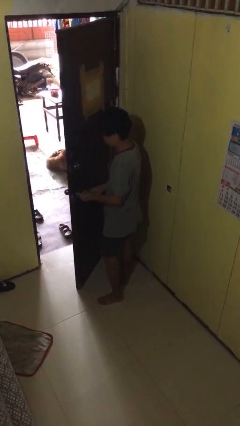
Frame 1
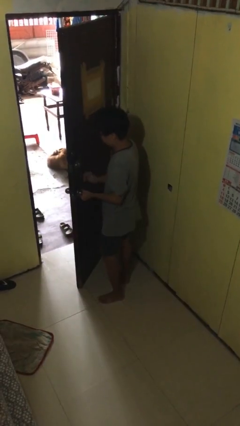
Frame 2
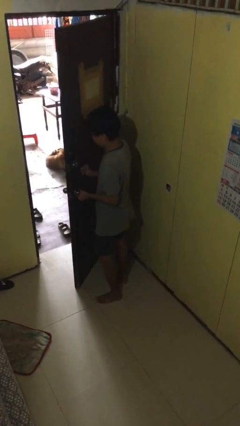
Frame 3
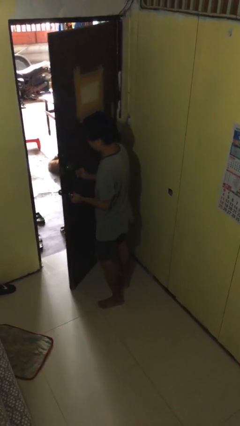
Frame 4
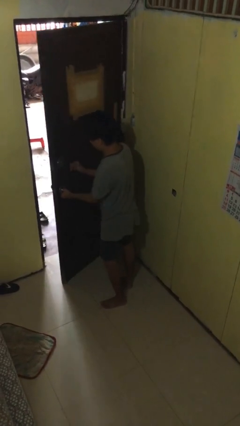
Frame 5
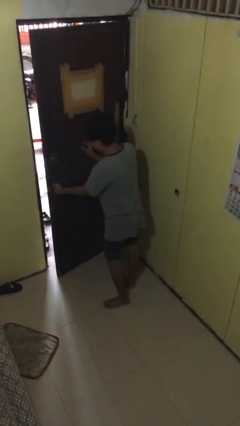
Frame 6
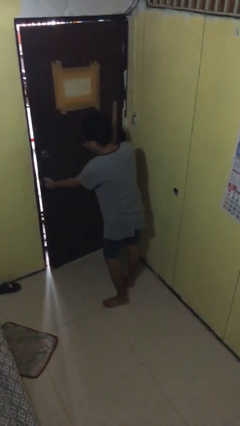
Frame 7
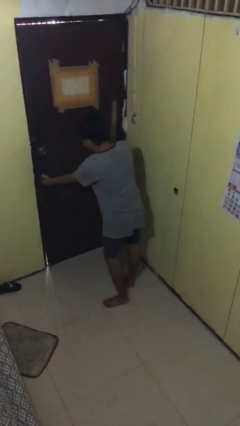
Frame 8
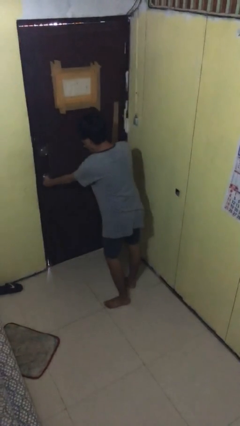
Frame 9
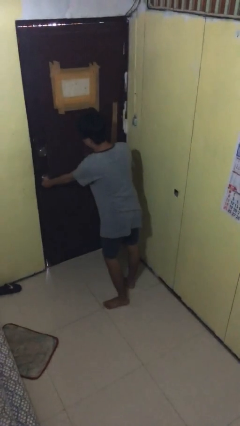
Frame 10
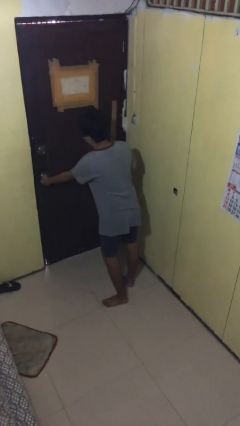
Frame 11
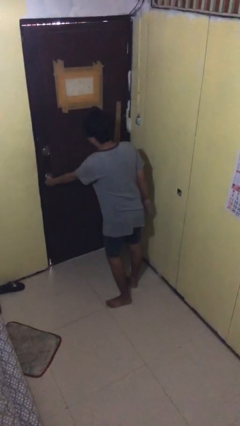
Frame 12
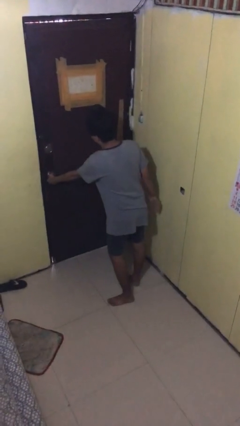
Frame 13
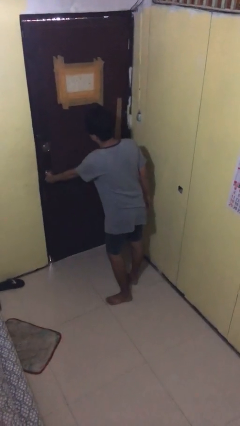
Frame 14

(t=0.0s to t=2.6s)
person closes facility door

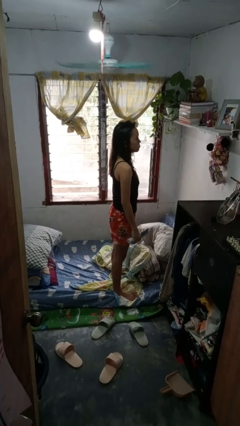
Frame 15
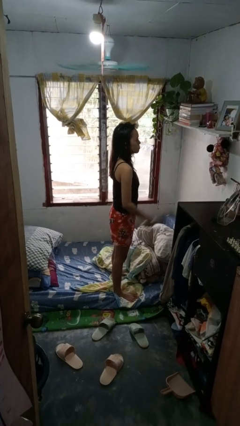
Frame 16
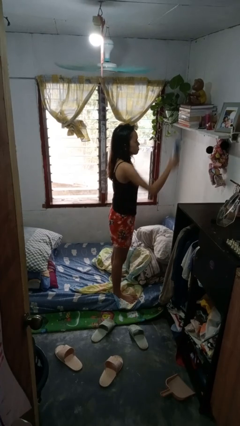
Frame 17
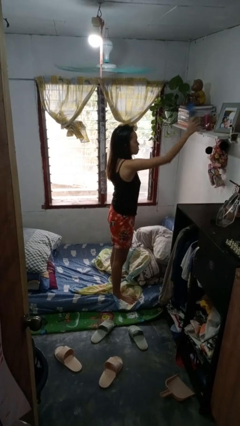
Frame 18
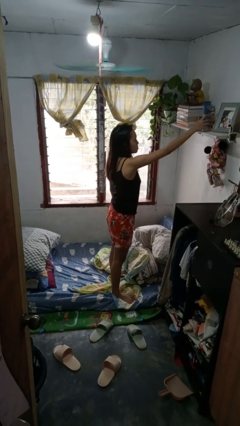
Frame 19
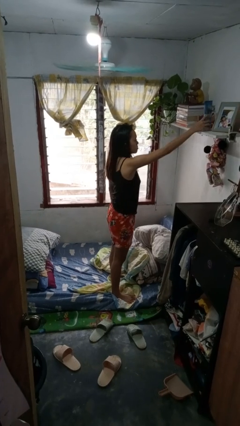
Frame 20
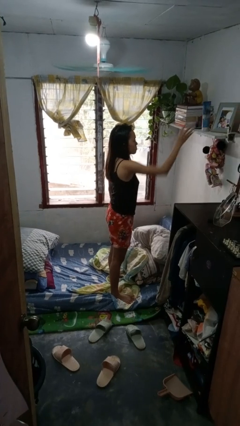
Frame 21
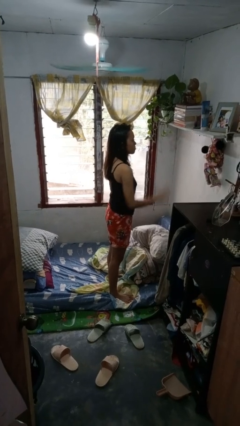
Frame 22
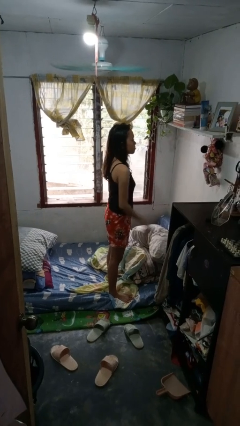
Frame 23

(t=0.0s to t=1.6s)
person puts down object on shelf

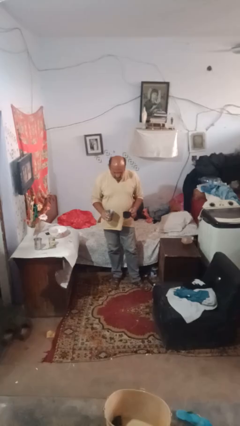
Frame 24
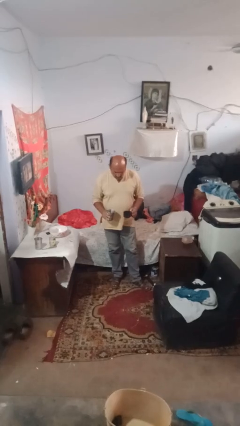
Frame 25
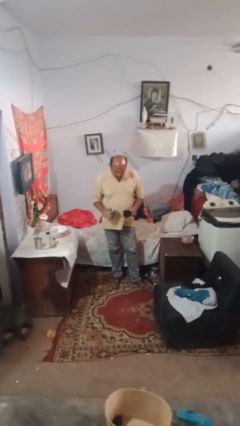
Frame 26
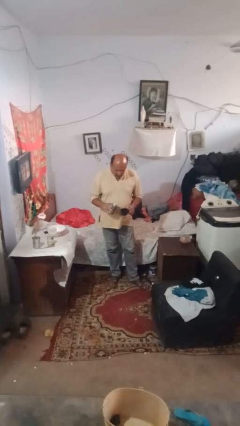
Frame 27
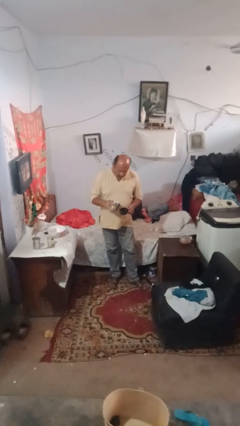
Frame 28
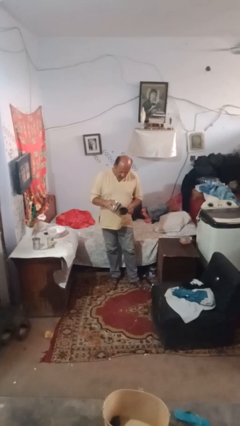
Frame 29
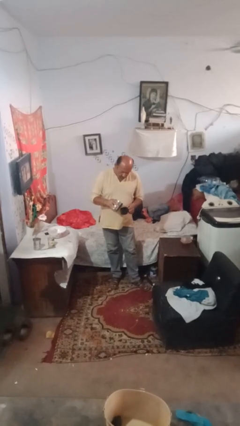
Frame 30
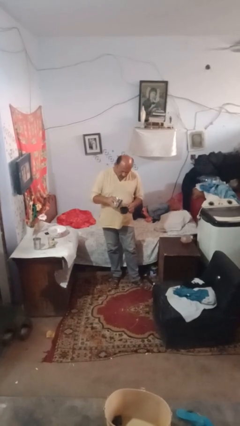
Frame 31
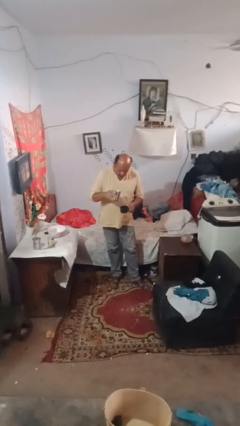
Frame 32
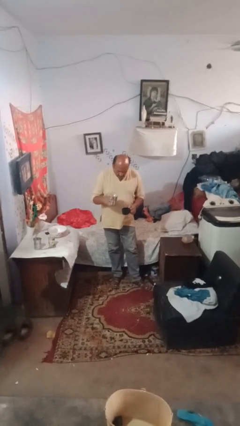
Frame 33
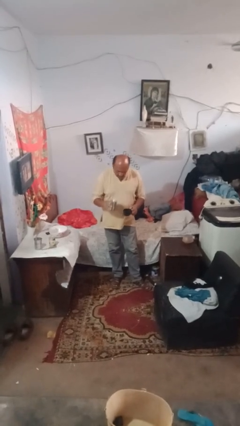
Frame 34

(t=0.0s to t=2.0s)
person pours liquid into cup

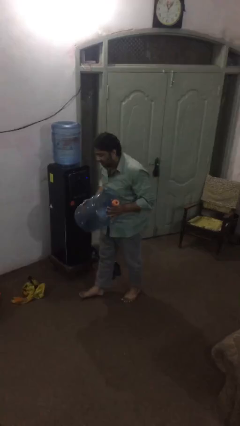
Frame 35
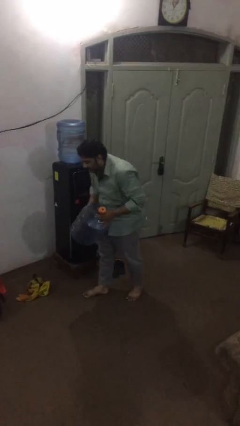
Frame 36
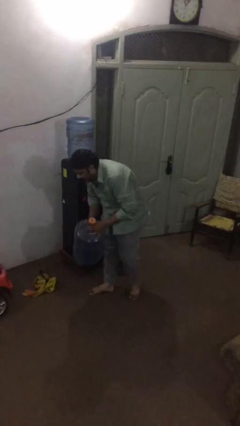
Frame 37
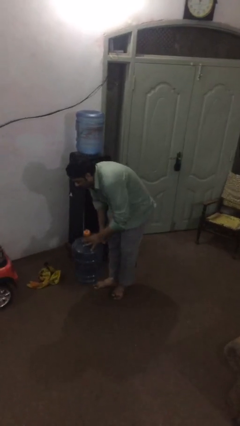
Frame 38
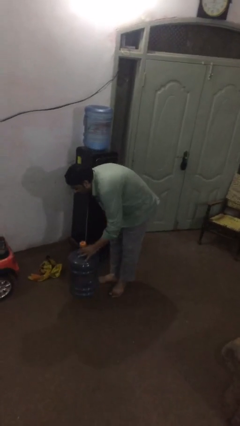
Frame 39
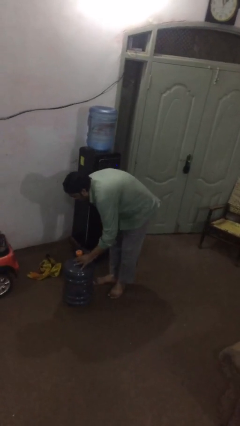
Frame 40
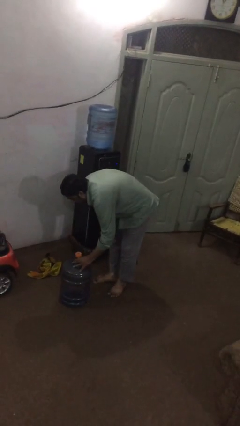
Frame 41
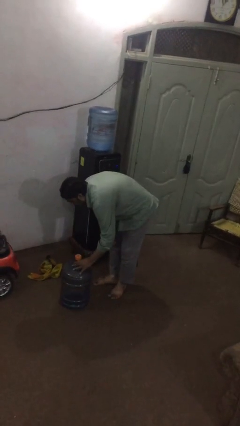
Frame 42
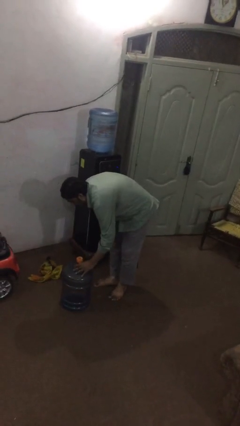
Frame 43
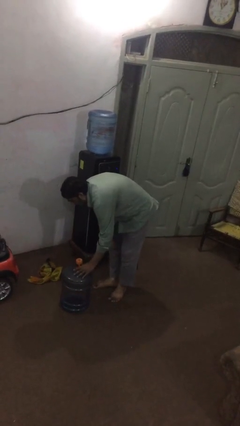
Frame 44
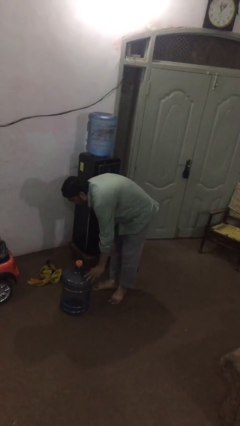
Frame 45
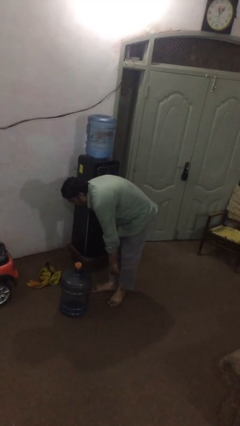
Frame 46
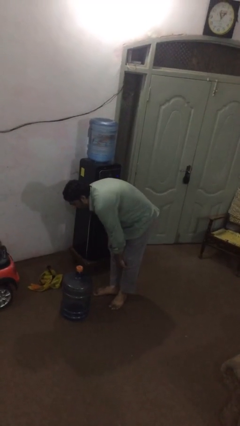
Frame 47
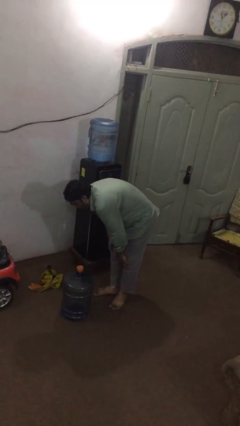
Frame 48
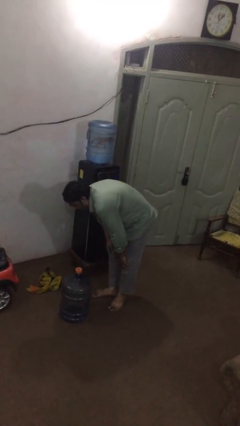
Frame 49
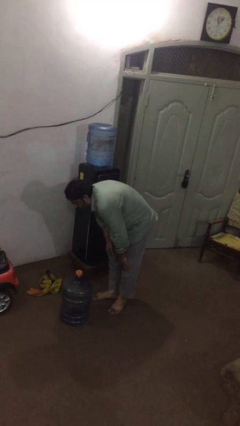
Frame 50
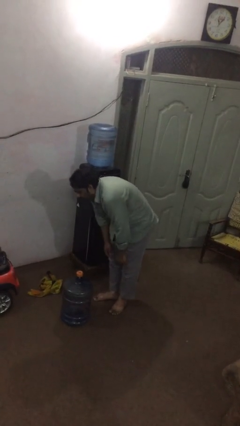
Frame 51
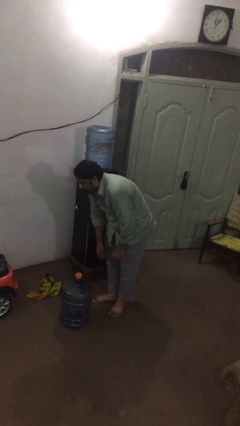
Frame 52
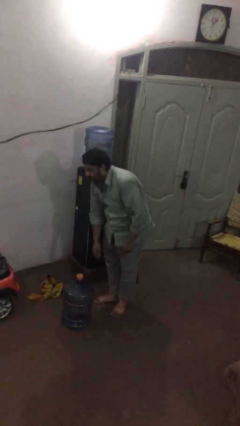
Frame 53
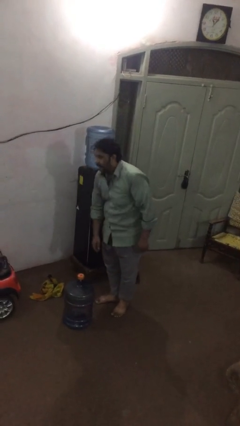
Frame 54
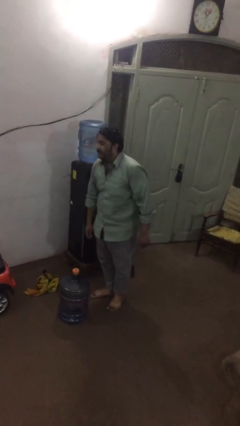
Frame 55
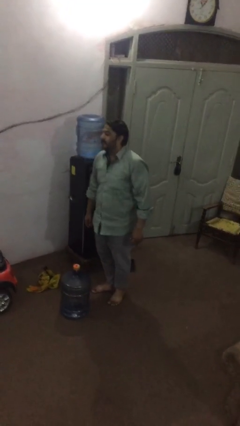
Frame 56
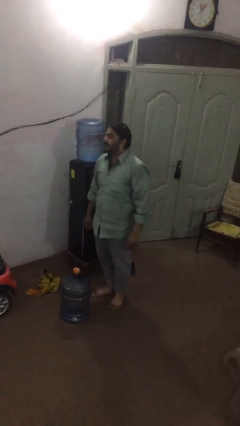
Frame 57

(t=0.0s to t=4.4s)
person puts down object on floor

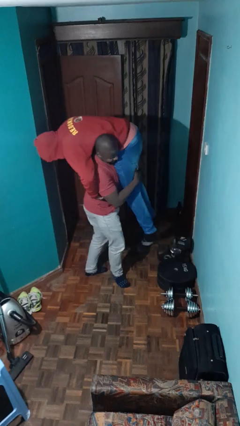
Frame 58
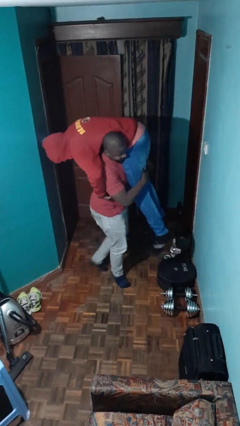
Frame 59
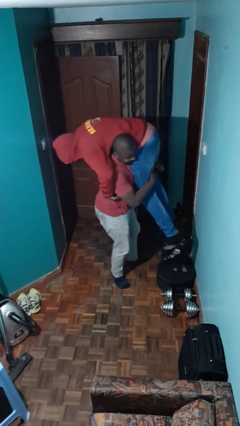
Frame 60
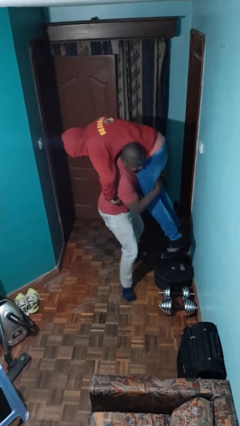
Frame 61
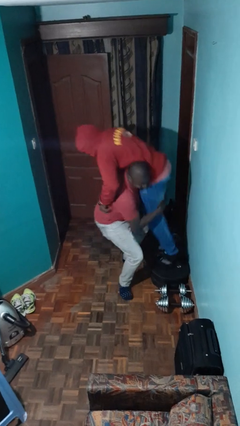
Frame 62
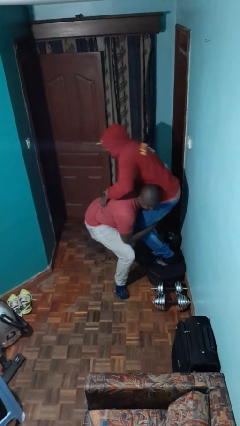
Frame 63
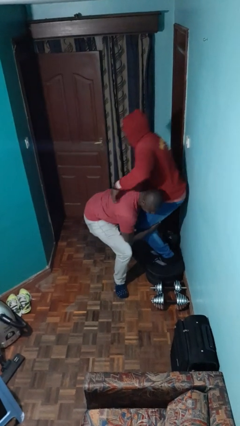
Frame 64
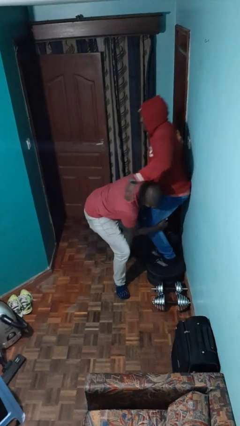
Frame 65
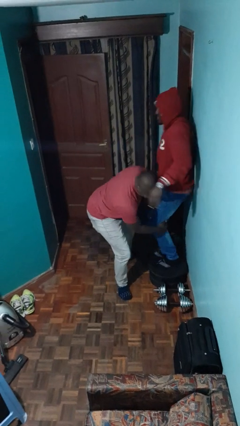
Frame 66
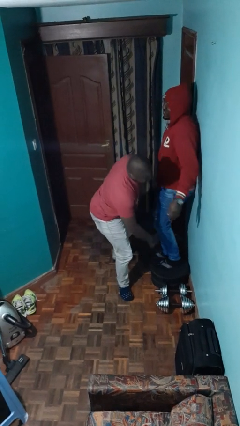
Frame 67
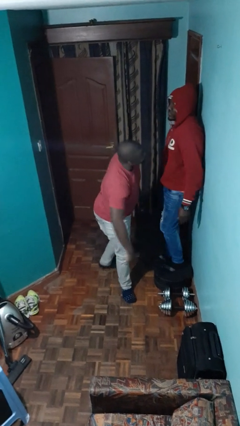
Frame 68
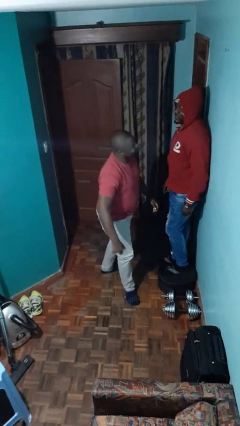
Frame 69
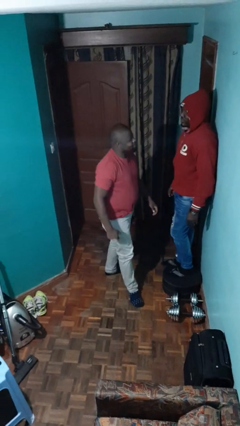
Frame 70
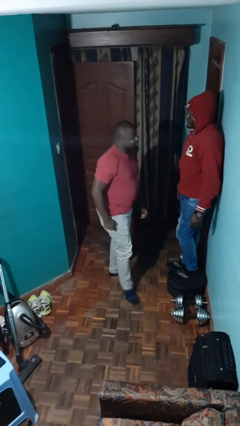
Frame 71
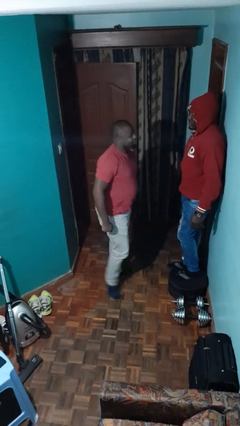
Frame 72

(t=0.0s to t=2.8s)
person puts down person

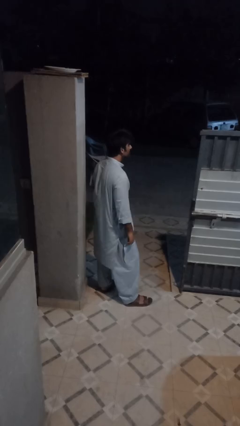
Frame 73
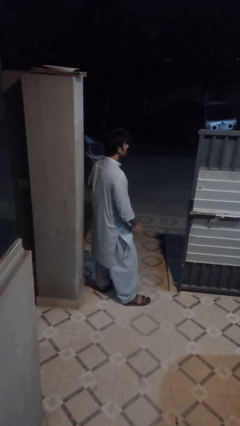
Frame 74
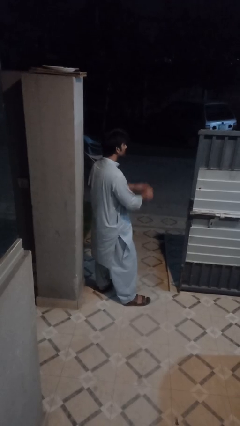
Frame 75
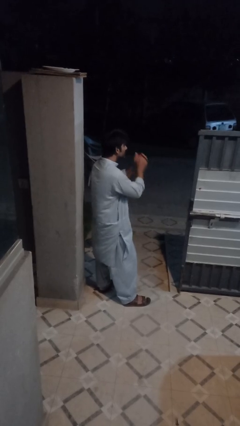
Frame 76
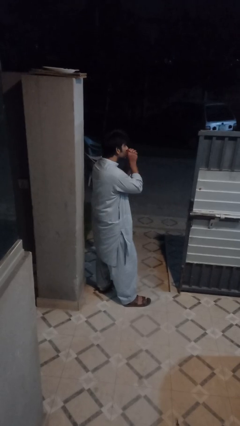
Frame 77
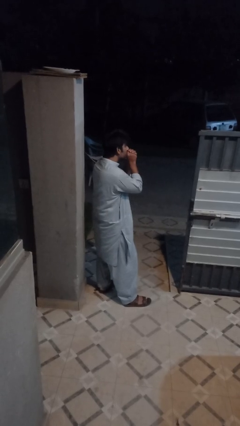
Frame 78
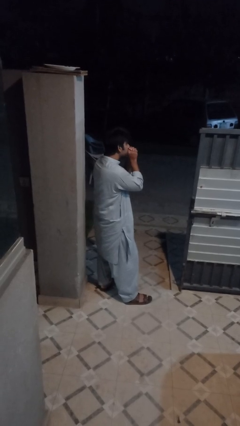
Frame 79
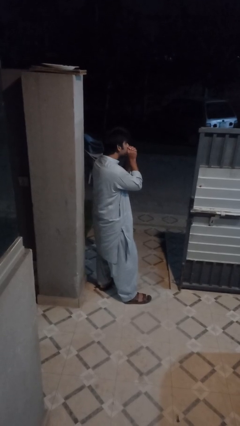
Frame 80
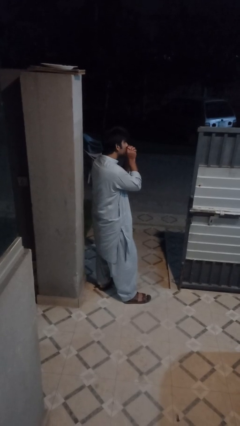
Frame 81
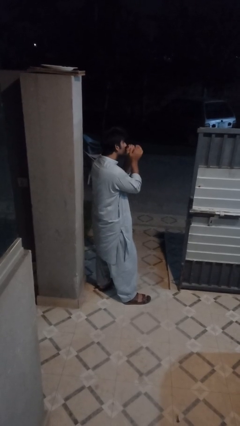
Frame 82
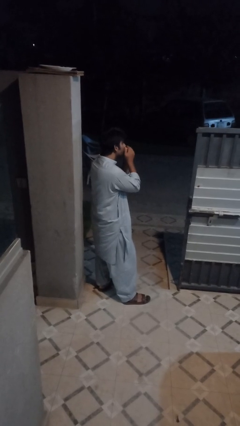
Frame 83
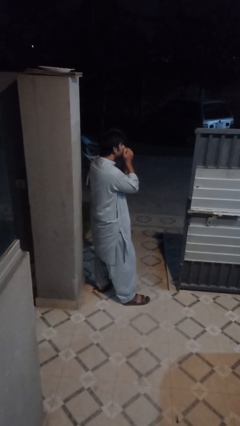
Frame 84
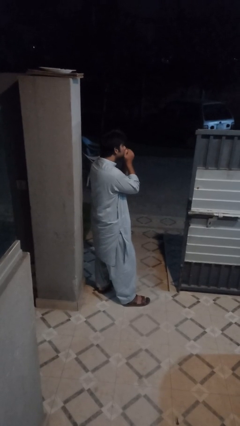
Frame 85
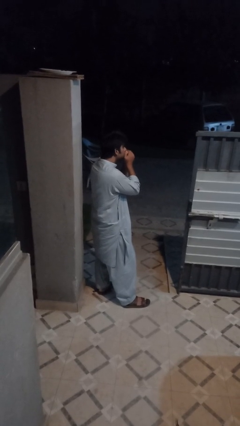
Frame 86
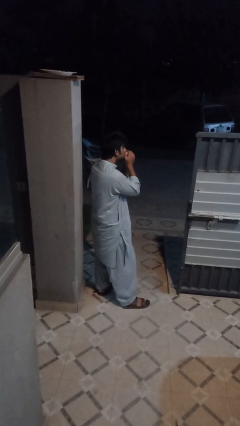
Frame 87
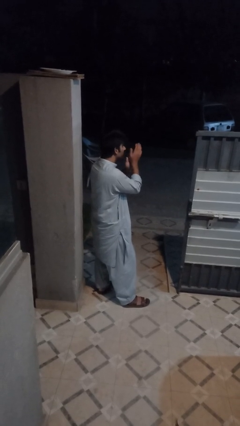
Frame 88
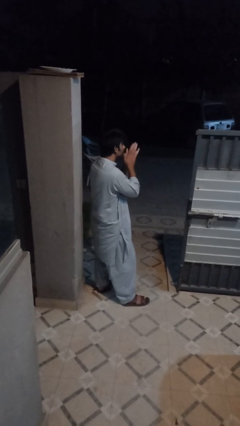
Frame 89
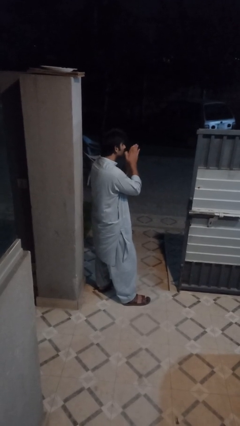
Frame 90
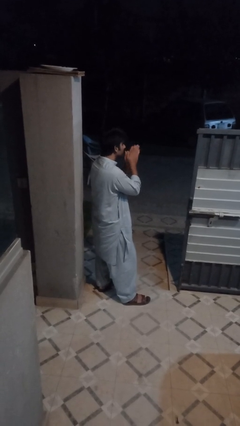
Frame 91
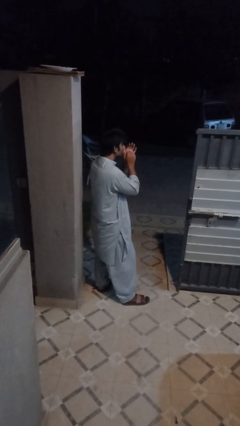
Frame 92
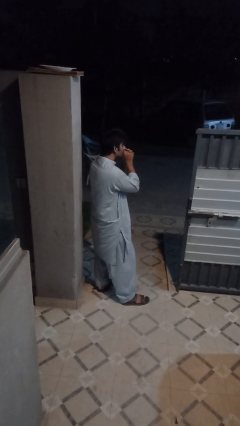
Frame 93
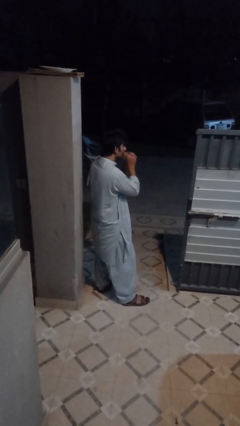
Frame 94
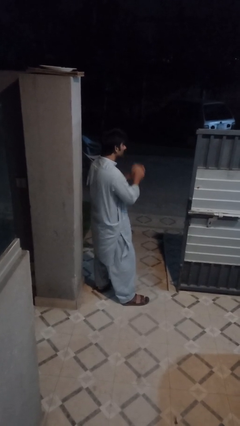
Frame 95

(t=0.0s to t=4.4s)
person blows into hands
